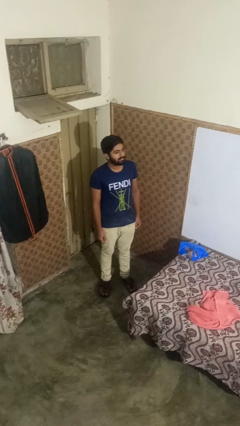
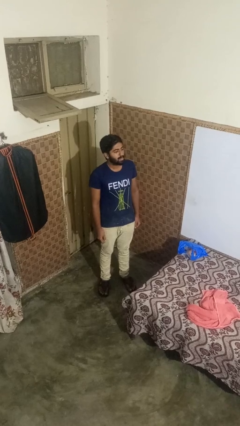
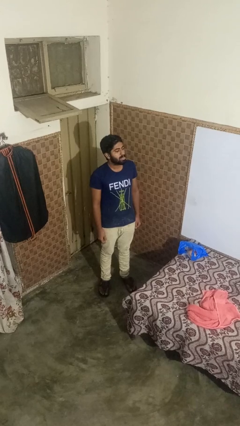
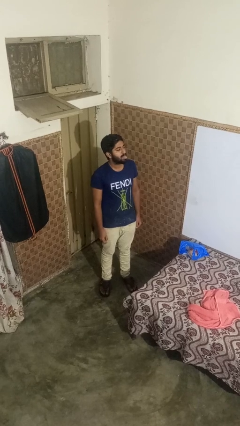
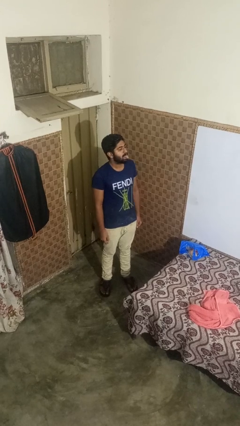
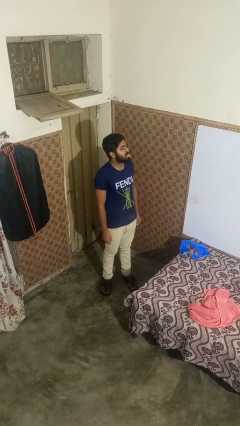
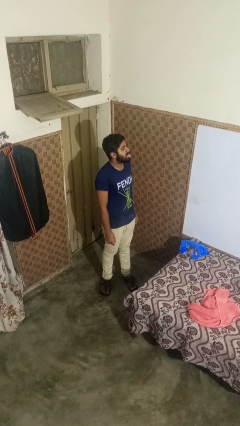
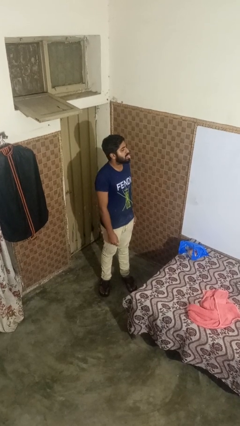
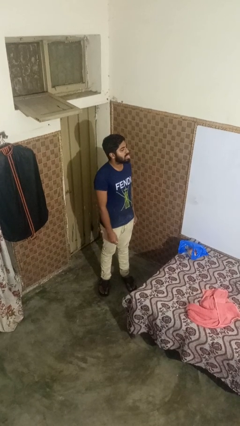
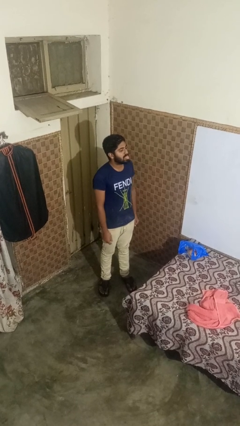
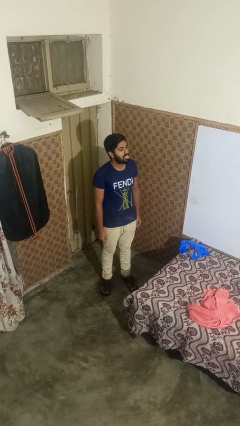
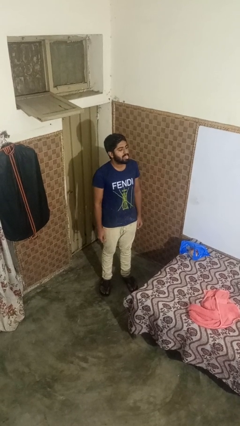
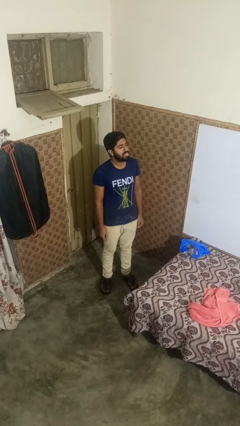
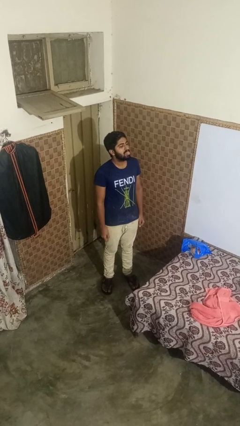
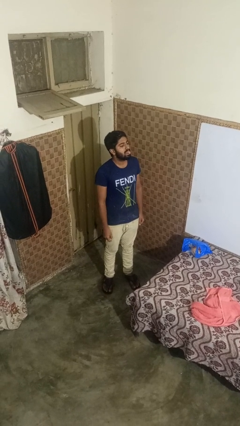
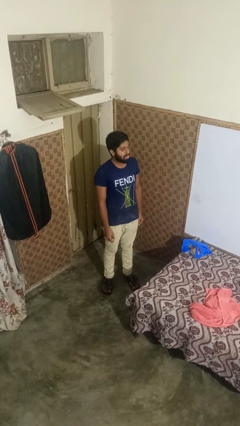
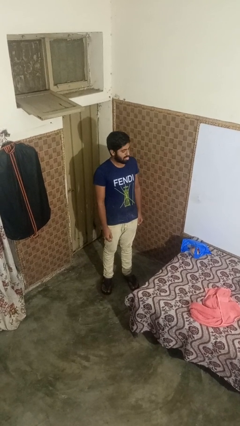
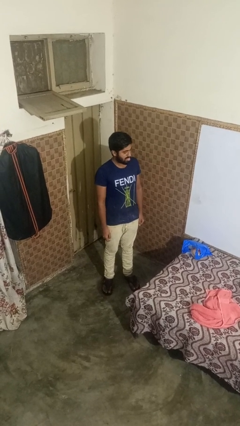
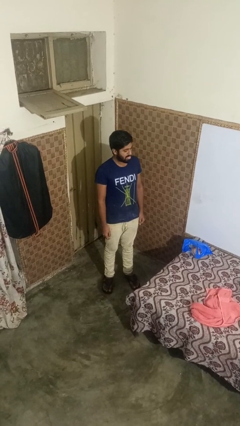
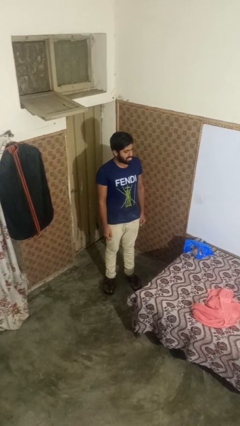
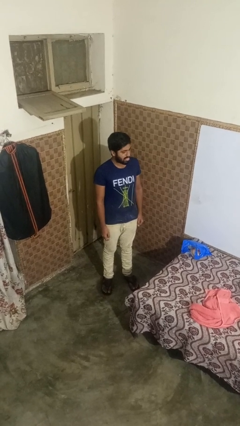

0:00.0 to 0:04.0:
person sticks out tongue

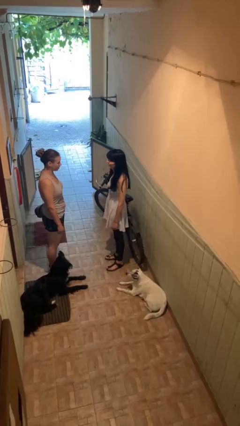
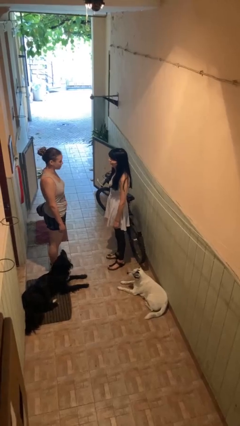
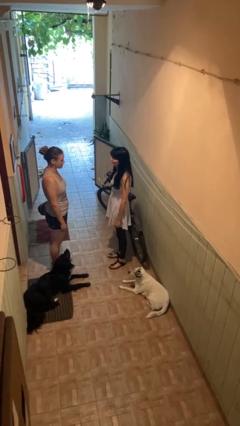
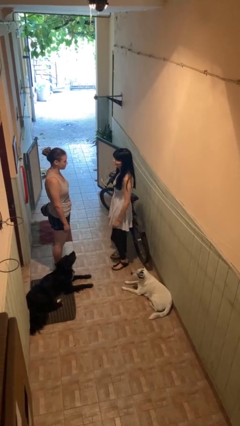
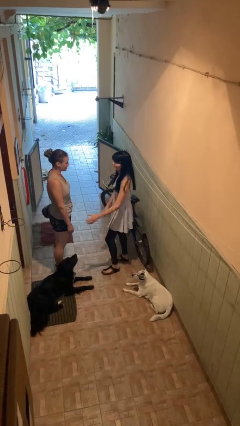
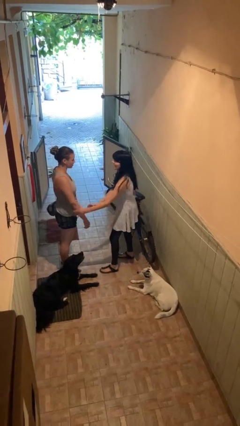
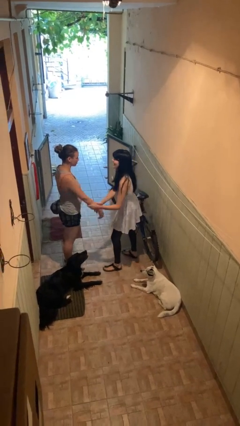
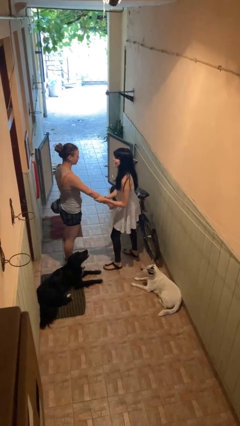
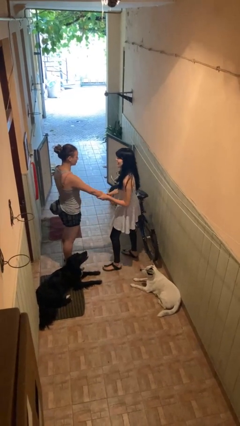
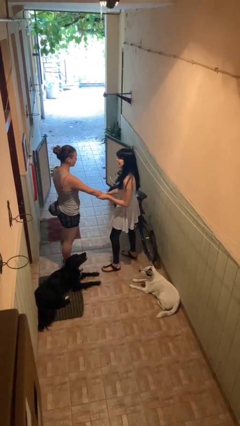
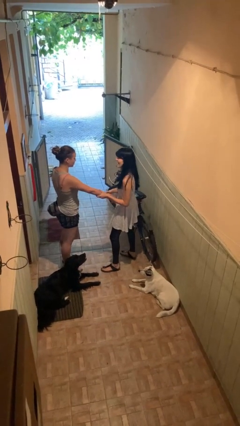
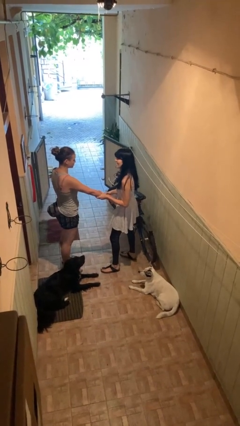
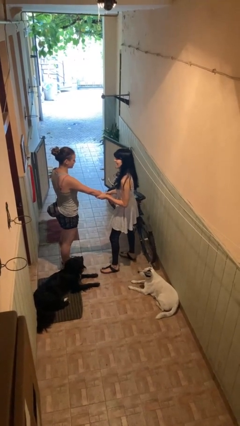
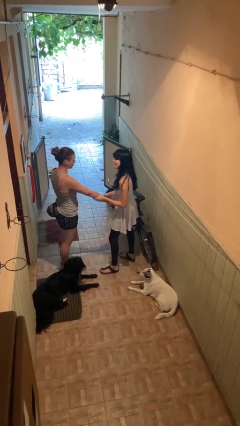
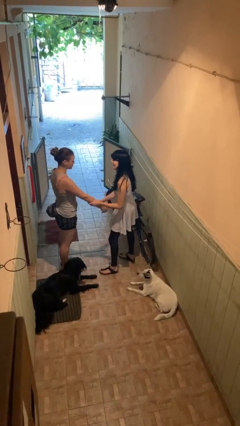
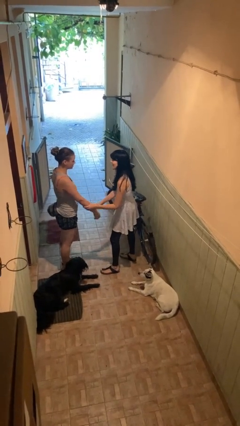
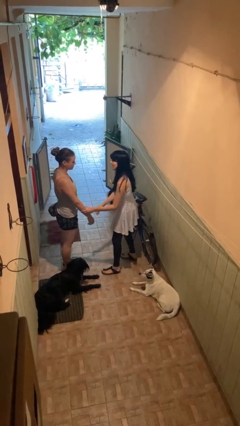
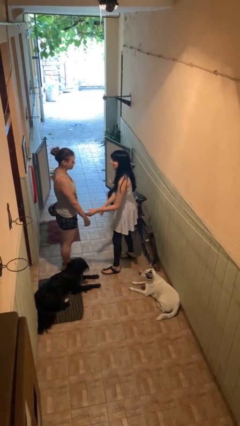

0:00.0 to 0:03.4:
person grabs person by forearm

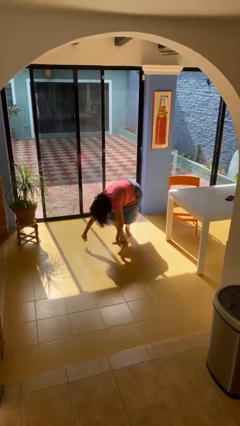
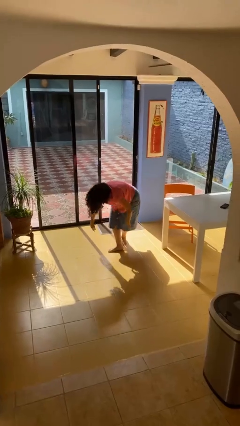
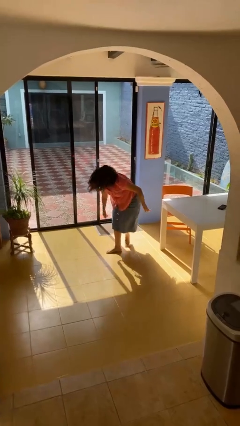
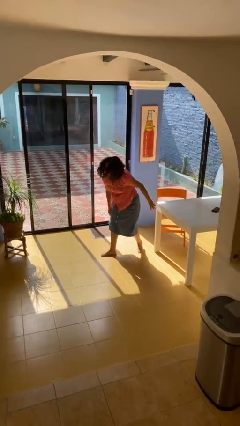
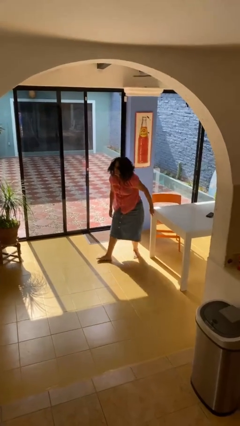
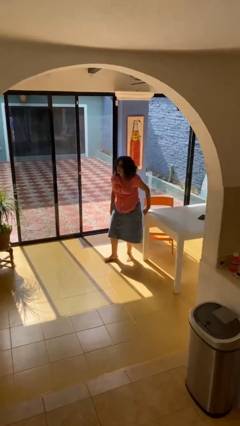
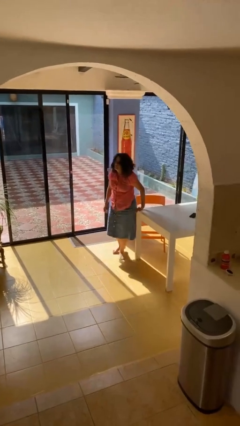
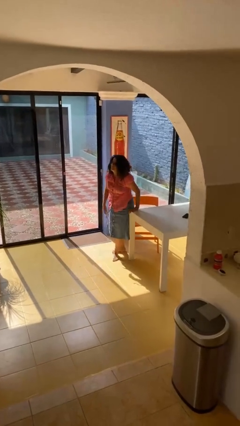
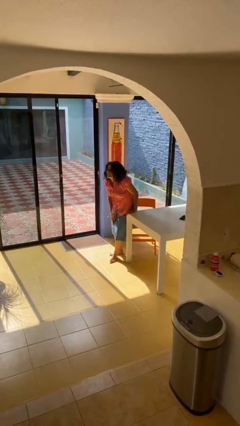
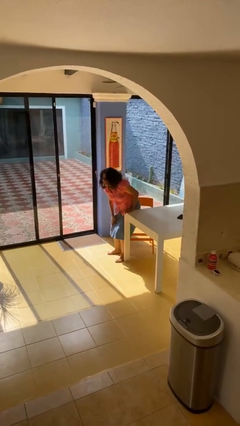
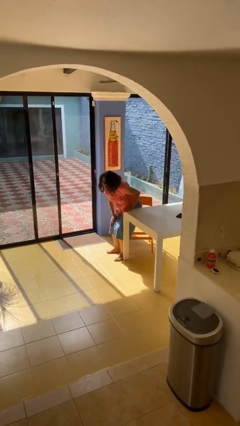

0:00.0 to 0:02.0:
person stands up from floor

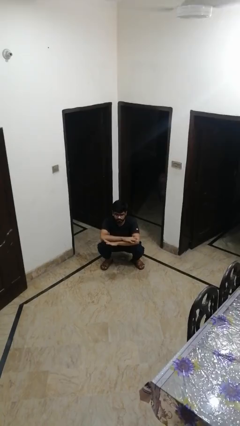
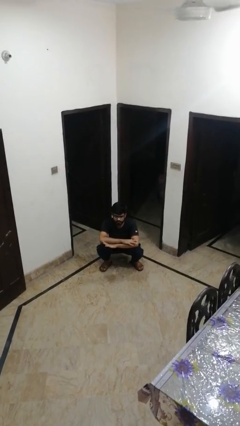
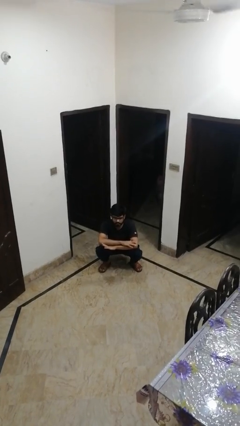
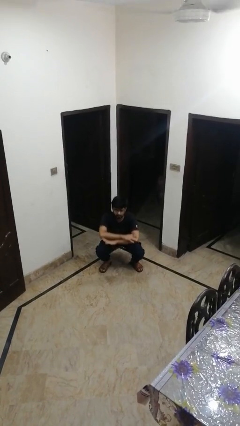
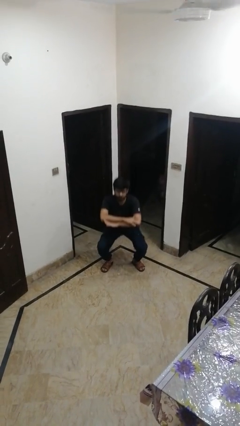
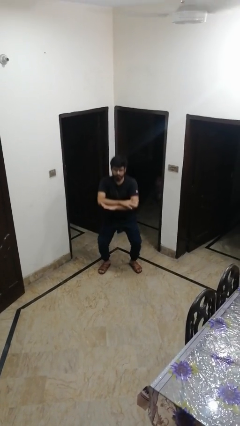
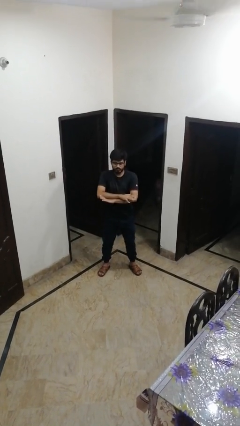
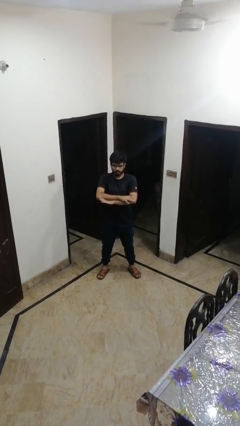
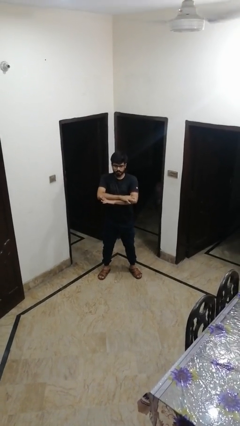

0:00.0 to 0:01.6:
person stands up

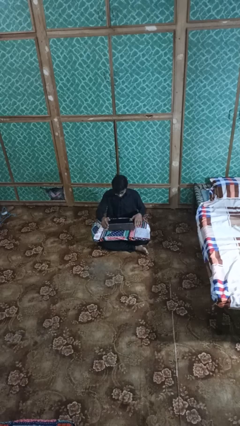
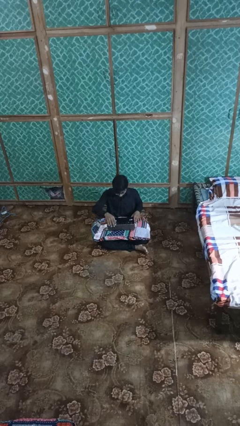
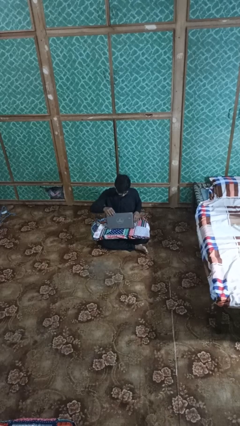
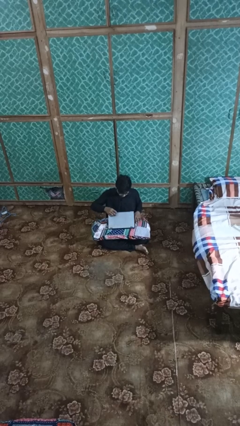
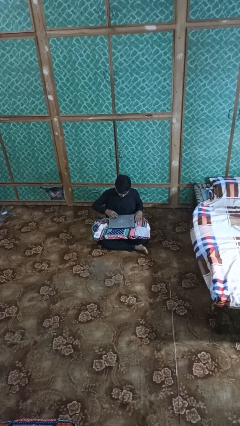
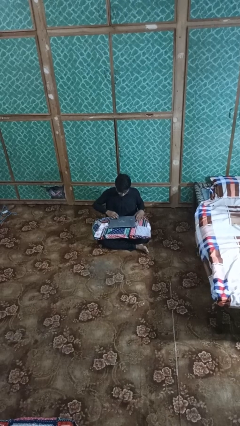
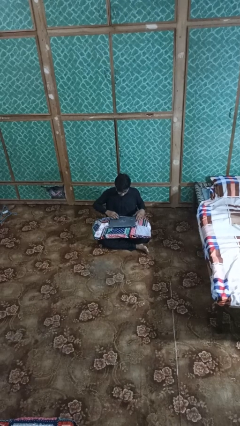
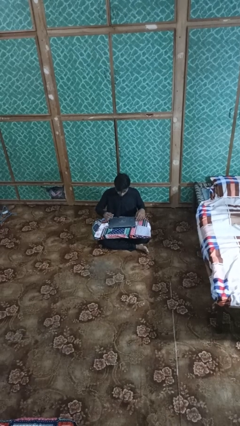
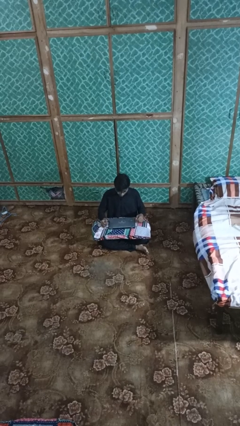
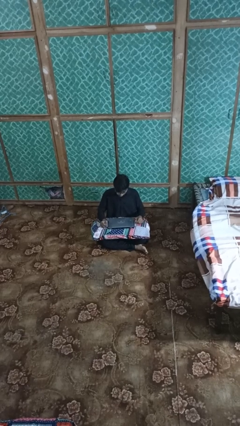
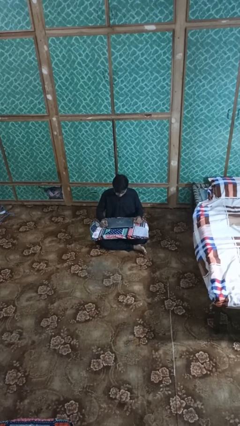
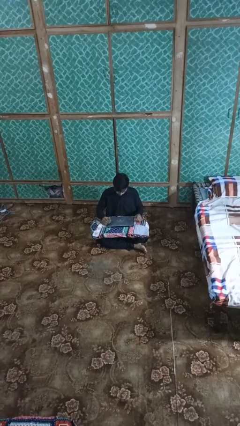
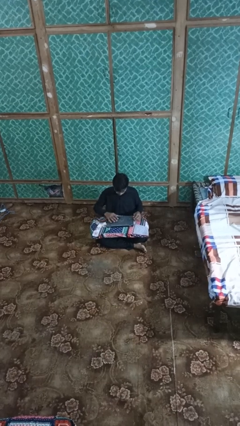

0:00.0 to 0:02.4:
person closes laptop

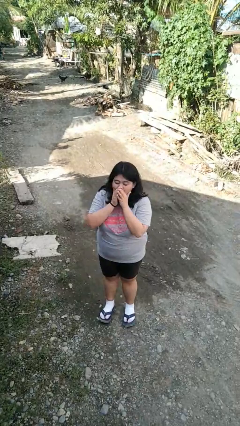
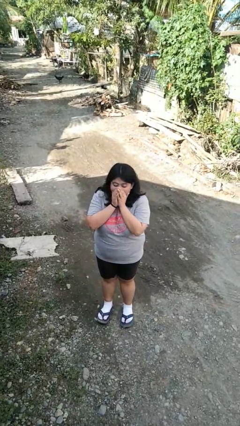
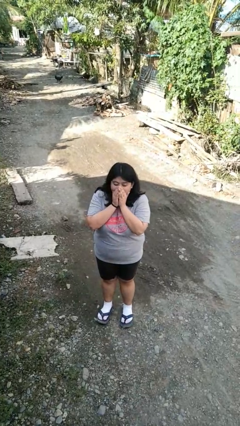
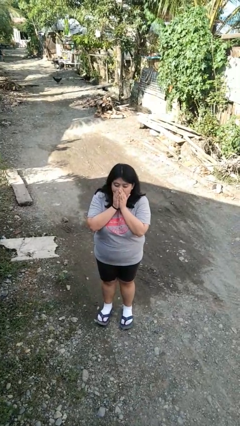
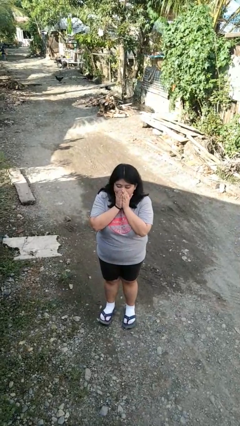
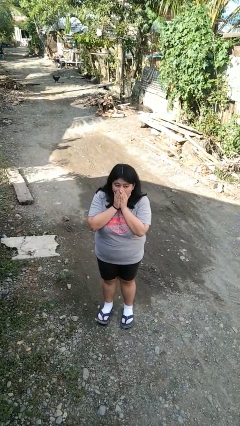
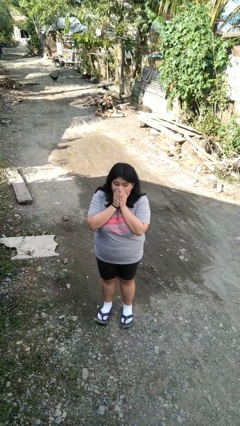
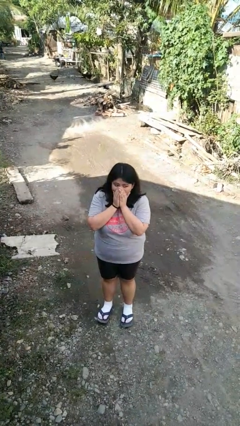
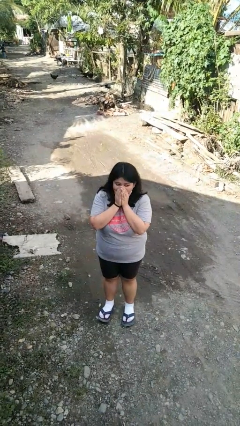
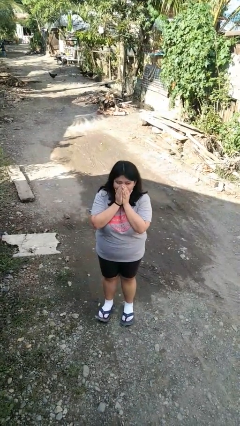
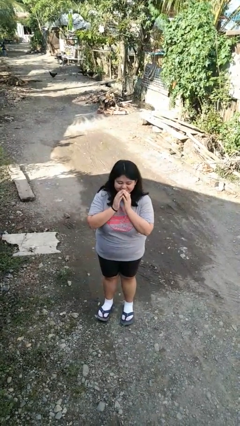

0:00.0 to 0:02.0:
person blows into hands

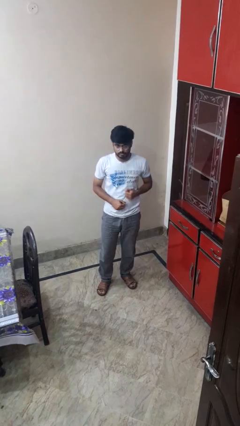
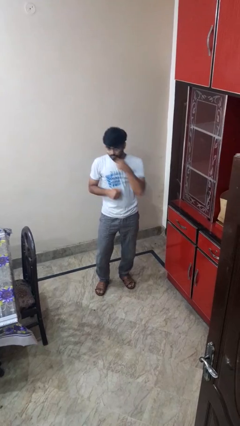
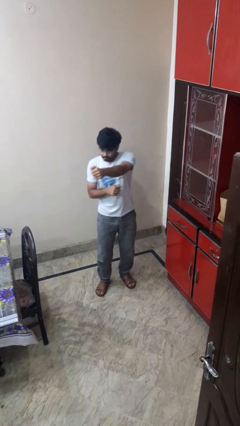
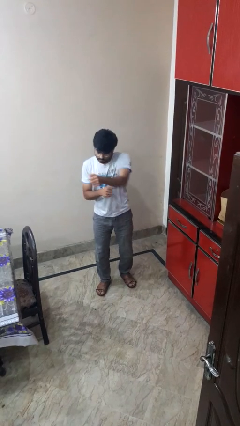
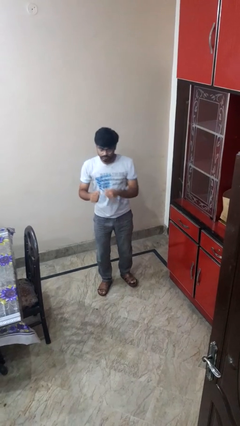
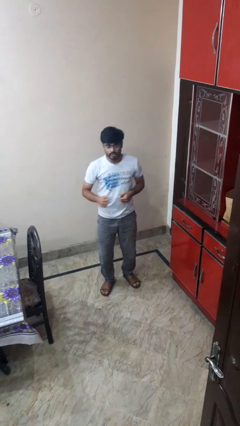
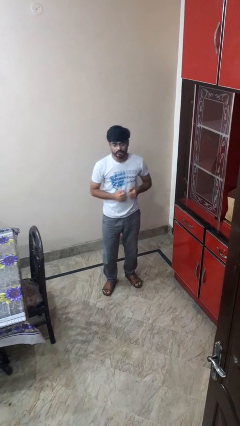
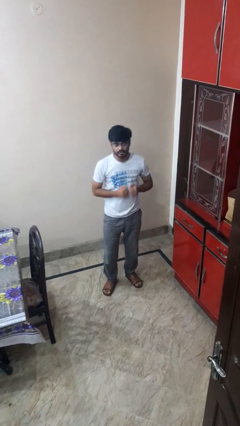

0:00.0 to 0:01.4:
person punches

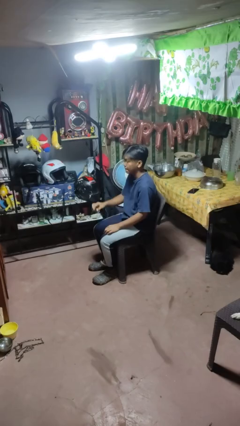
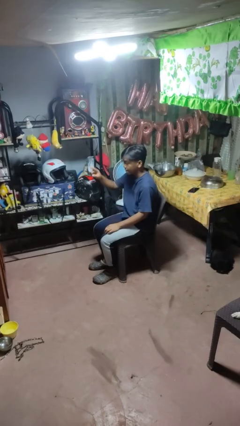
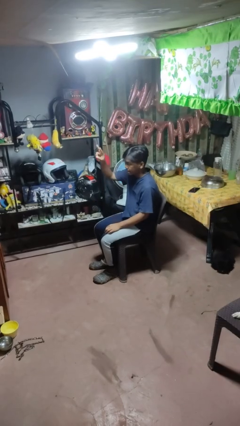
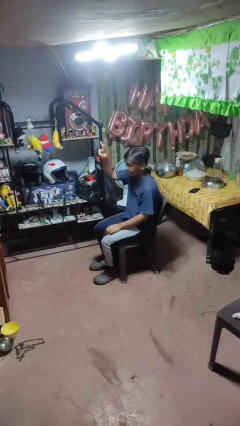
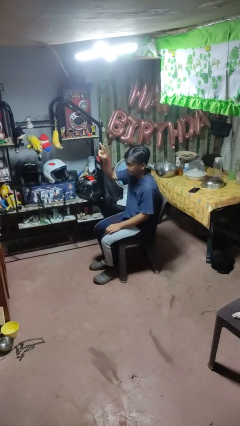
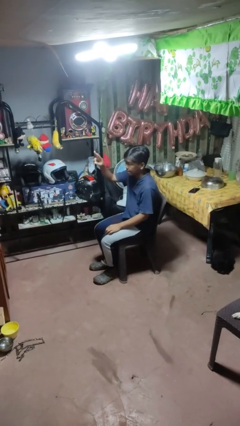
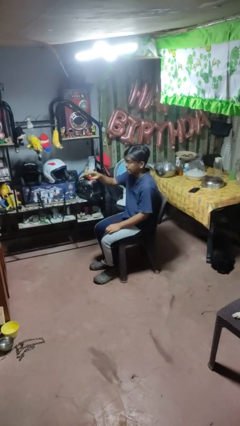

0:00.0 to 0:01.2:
person gestures peace
